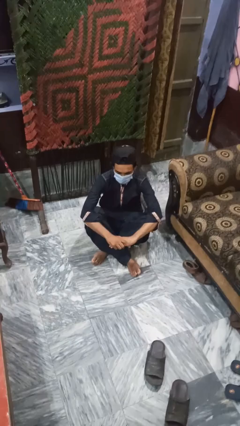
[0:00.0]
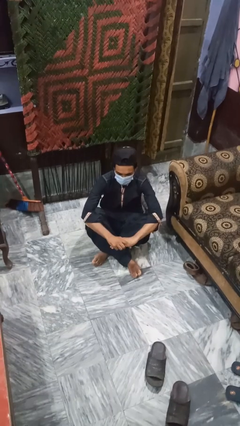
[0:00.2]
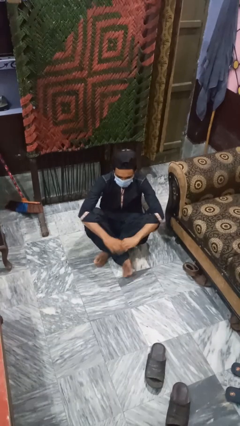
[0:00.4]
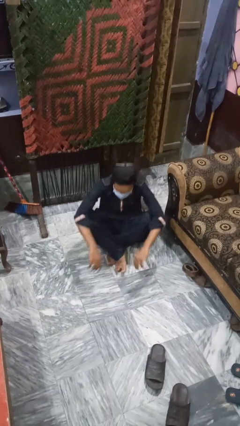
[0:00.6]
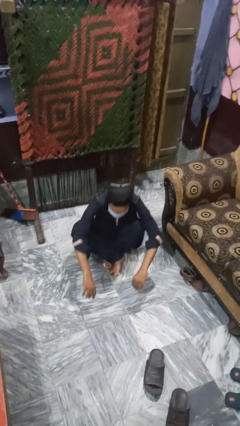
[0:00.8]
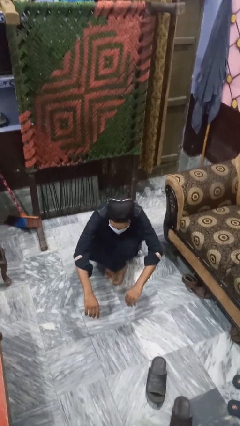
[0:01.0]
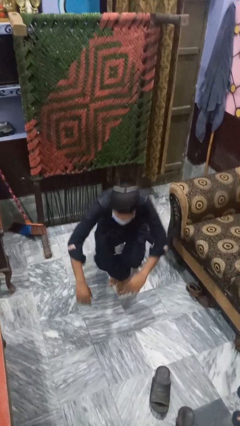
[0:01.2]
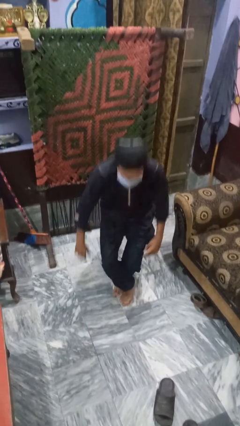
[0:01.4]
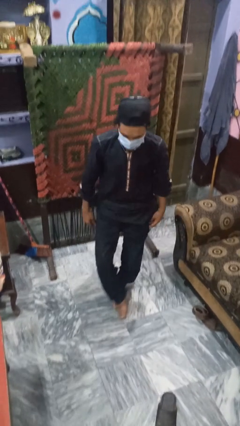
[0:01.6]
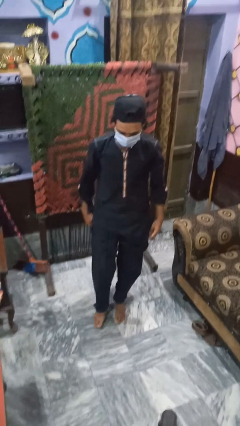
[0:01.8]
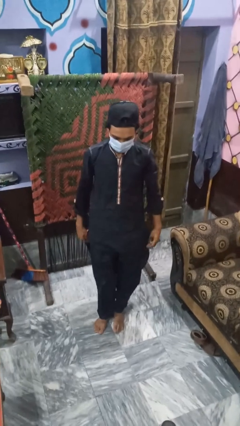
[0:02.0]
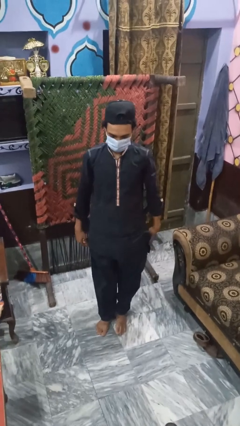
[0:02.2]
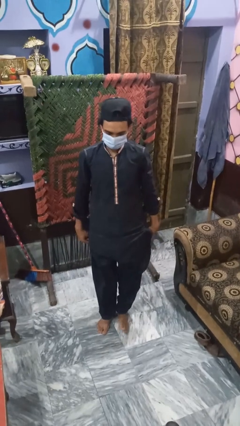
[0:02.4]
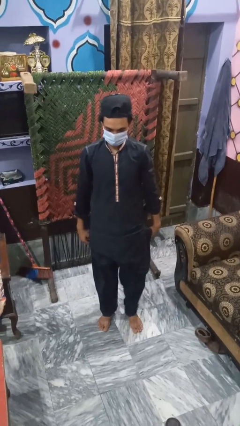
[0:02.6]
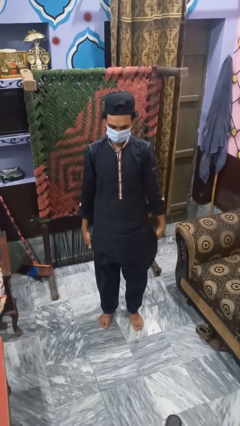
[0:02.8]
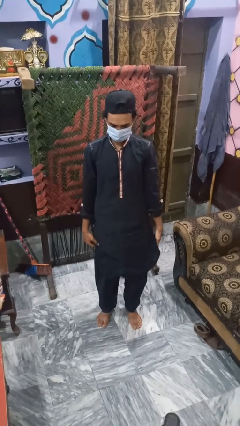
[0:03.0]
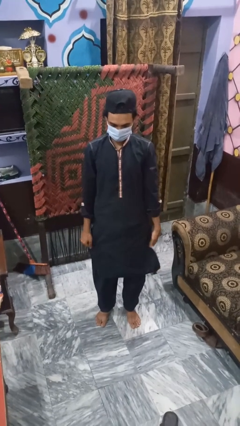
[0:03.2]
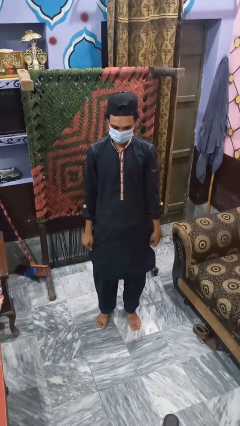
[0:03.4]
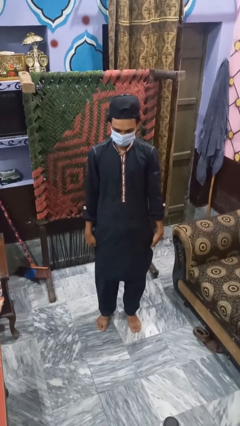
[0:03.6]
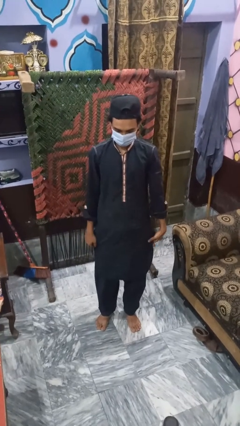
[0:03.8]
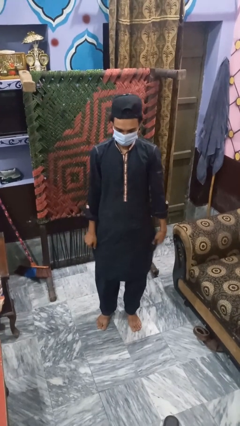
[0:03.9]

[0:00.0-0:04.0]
person stands up from floor

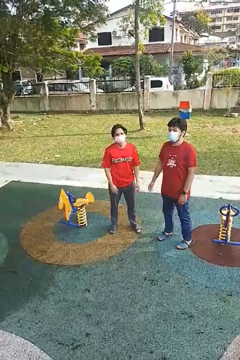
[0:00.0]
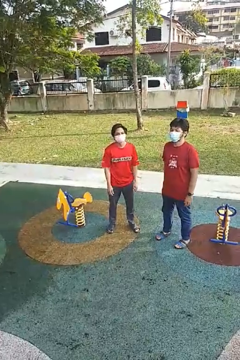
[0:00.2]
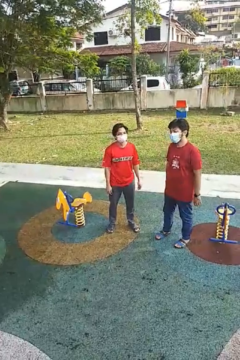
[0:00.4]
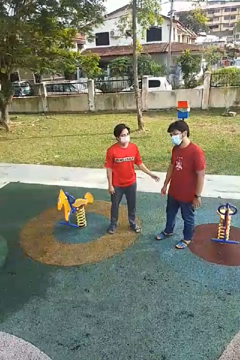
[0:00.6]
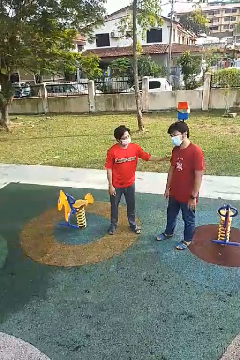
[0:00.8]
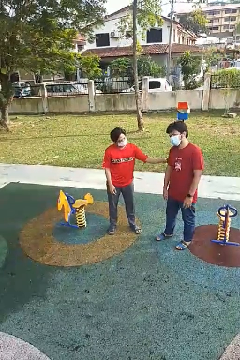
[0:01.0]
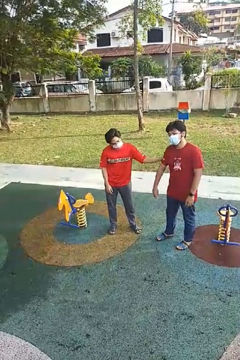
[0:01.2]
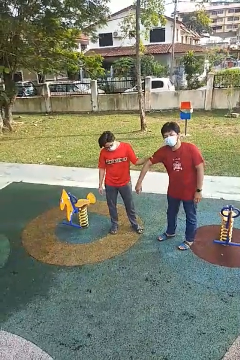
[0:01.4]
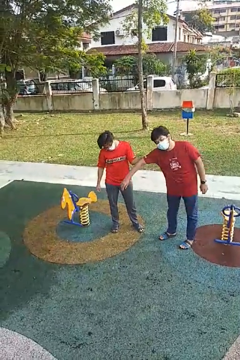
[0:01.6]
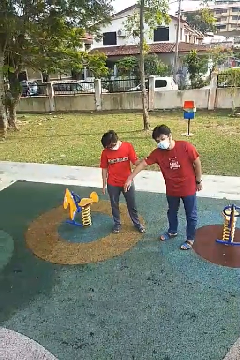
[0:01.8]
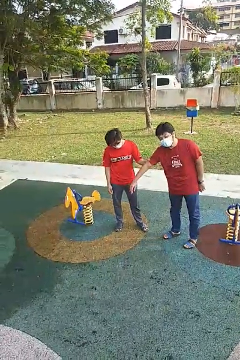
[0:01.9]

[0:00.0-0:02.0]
person grabs person by bicep

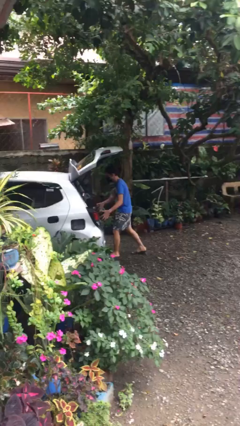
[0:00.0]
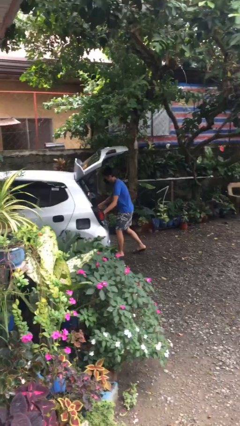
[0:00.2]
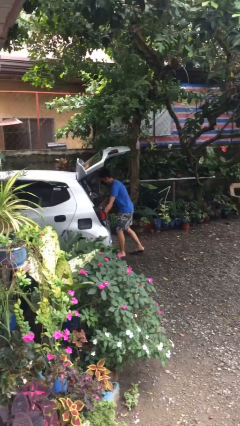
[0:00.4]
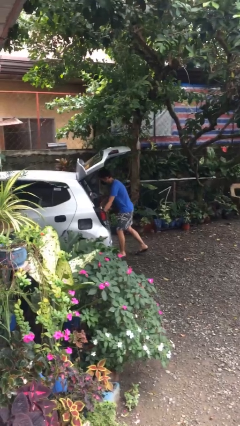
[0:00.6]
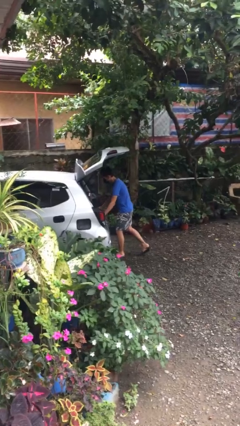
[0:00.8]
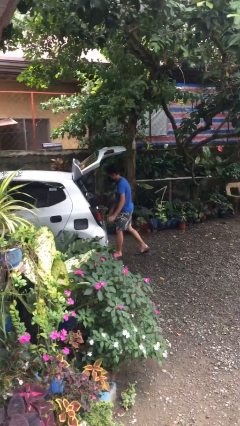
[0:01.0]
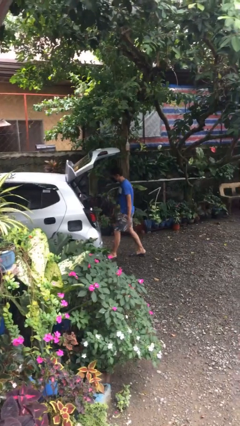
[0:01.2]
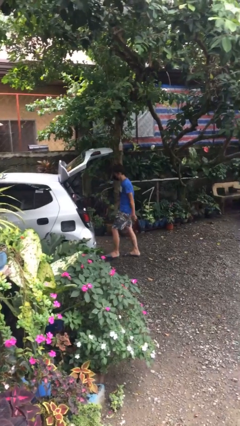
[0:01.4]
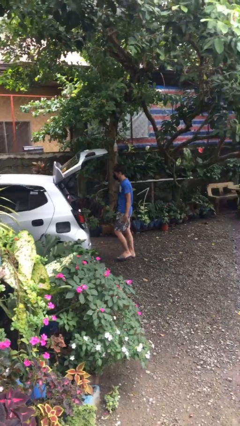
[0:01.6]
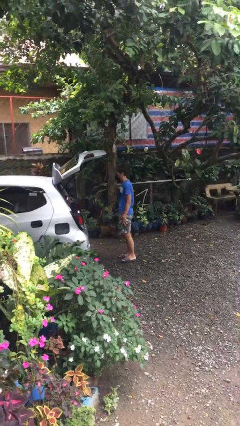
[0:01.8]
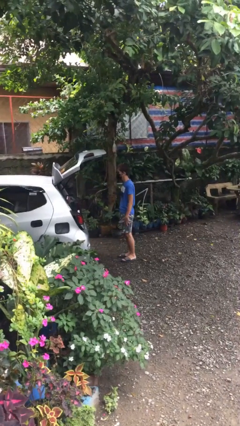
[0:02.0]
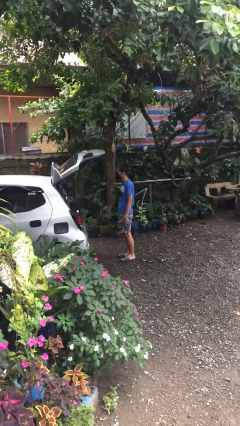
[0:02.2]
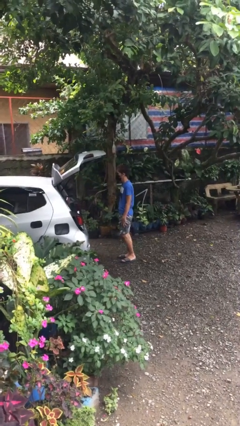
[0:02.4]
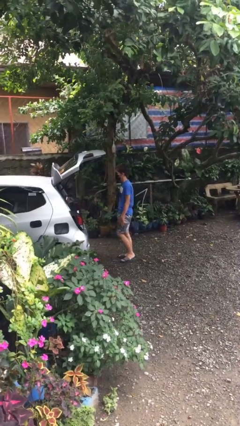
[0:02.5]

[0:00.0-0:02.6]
person loads car

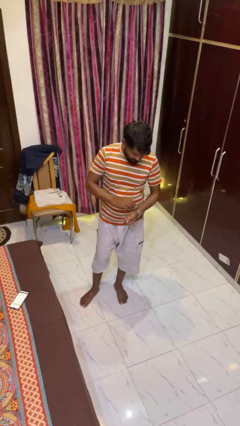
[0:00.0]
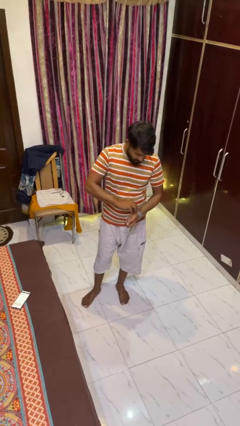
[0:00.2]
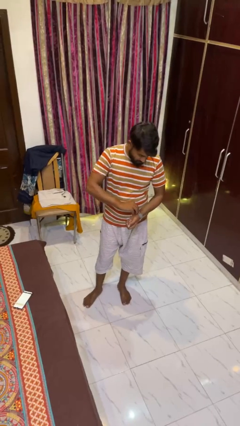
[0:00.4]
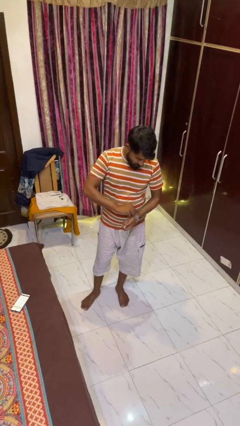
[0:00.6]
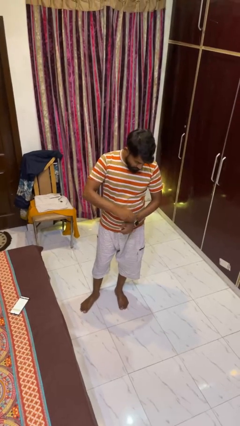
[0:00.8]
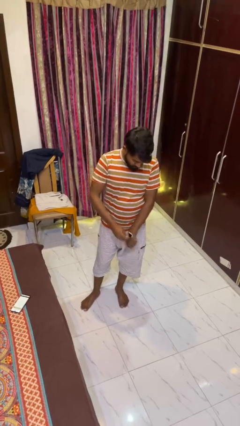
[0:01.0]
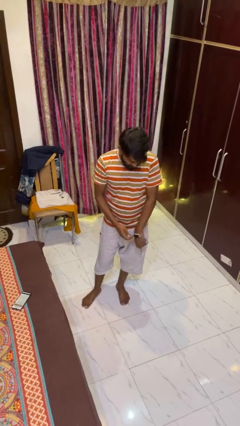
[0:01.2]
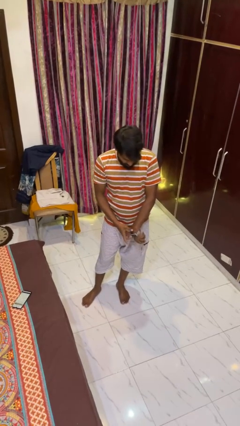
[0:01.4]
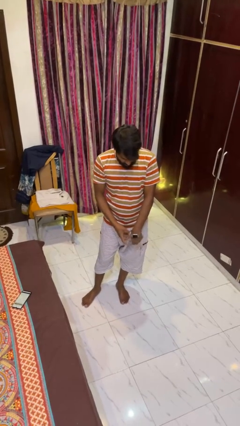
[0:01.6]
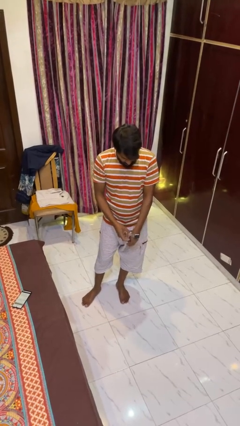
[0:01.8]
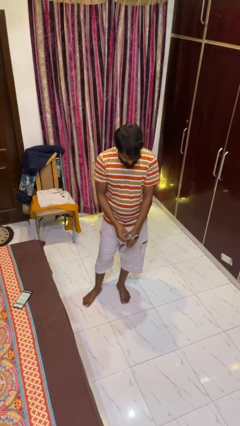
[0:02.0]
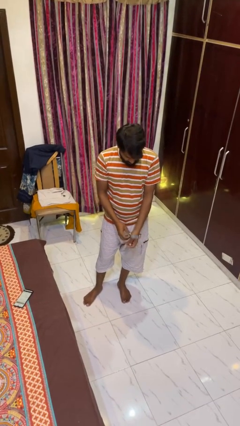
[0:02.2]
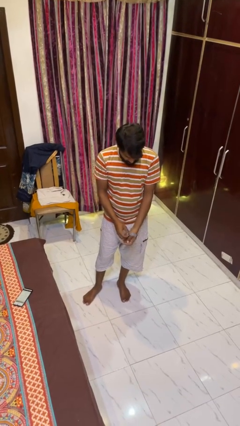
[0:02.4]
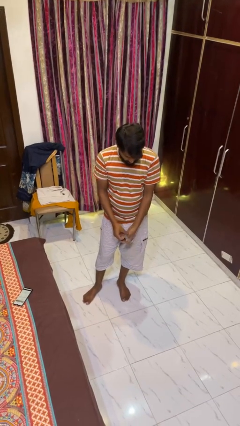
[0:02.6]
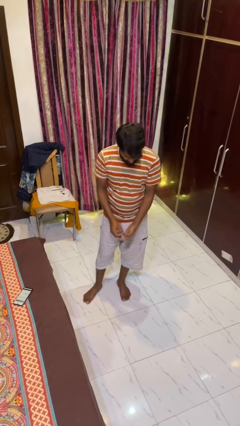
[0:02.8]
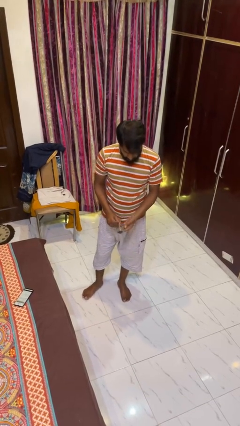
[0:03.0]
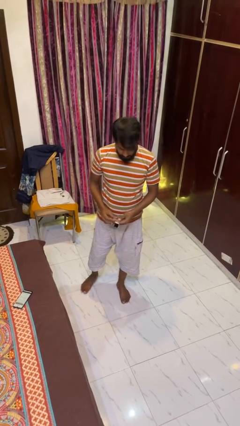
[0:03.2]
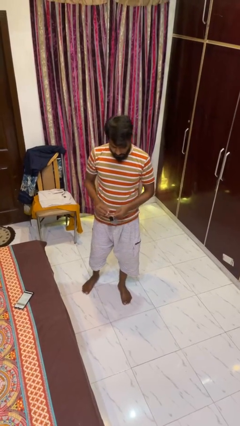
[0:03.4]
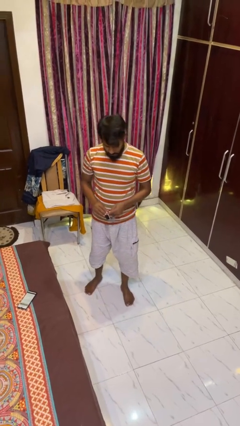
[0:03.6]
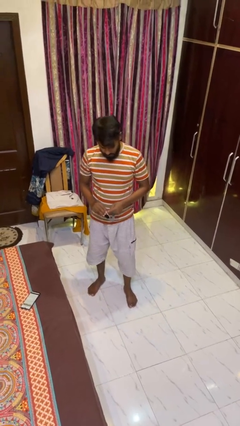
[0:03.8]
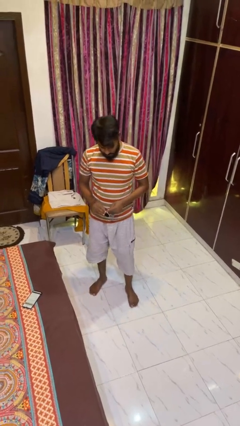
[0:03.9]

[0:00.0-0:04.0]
person takes off wristwatch

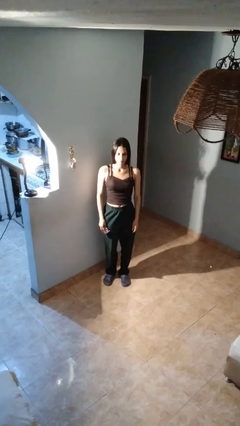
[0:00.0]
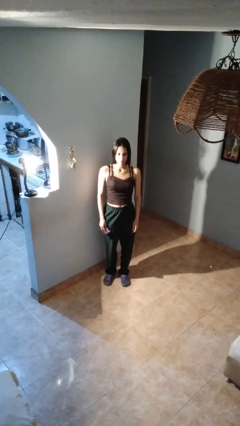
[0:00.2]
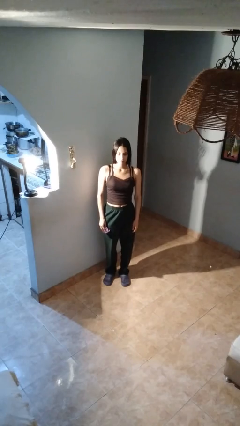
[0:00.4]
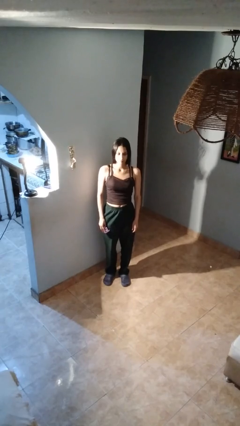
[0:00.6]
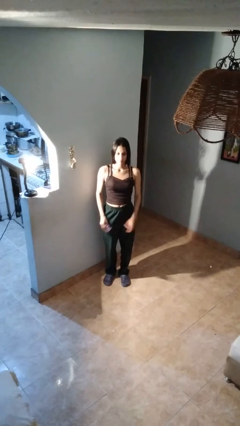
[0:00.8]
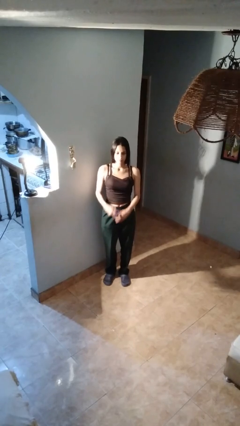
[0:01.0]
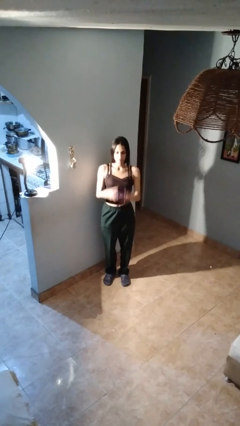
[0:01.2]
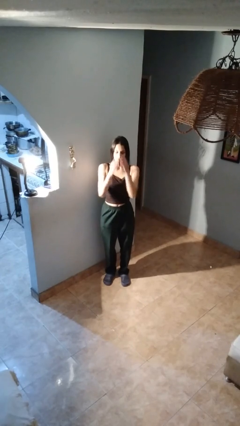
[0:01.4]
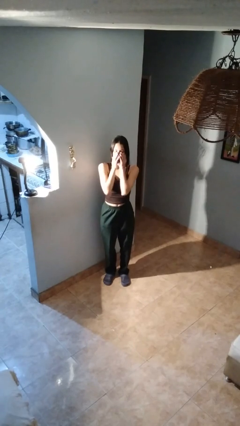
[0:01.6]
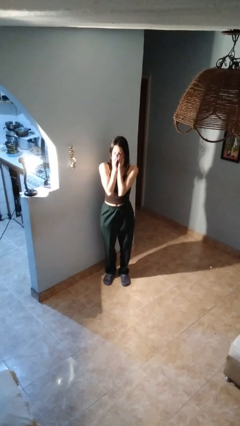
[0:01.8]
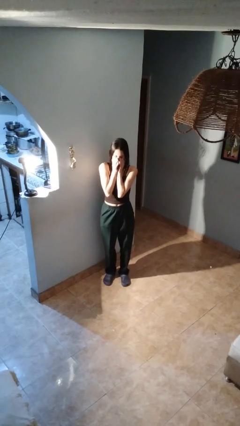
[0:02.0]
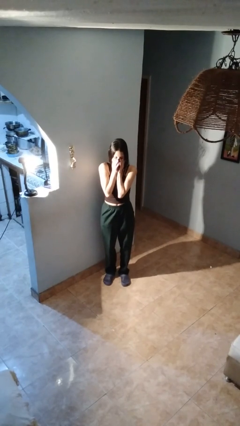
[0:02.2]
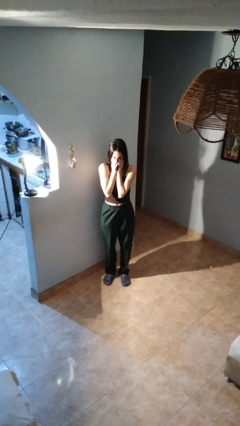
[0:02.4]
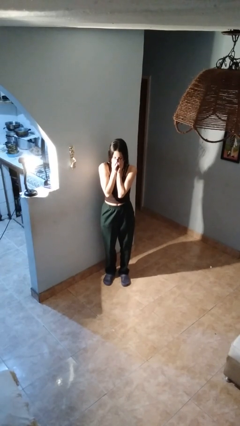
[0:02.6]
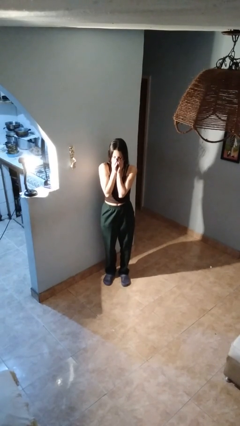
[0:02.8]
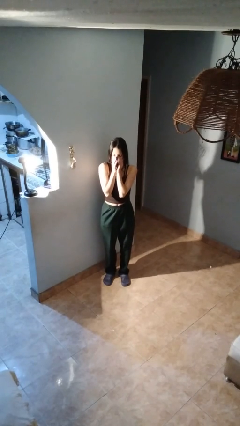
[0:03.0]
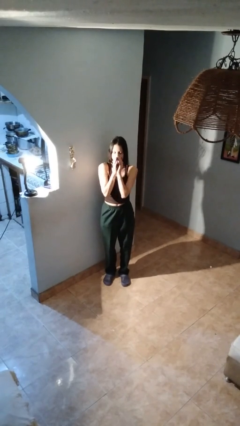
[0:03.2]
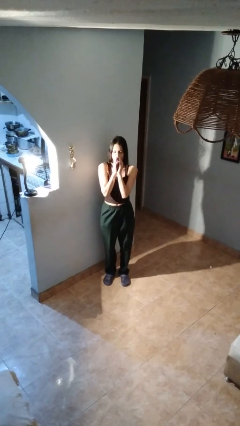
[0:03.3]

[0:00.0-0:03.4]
person blows nose

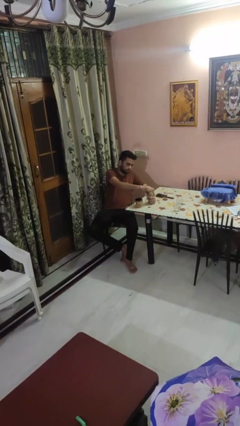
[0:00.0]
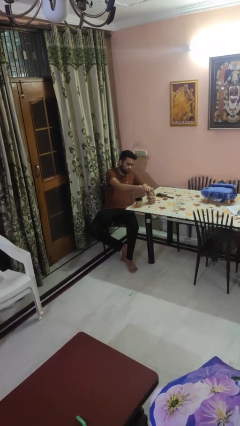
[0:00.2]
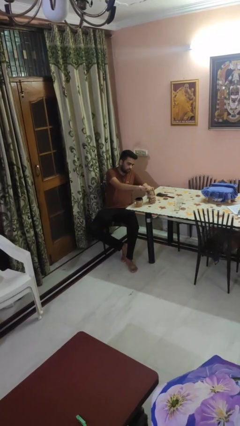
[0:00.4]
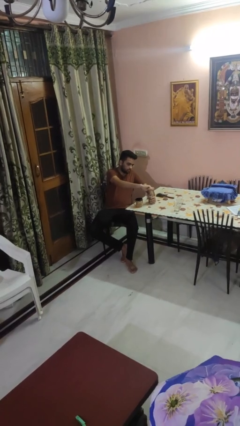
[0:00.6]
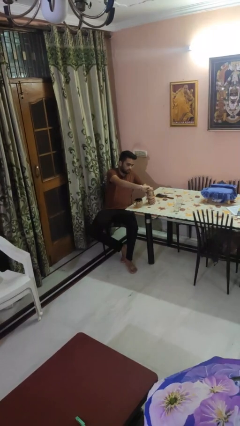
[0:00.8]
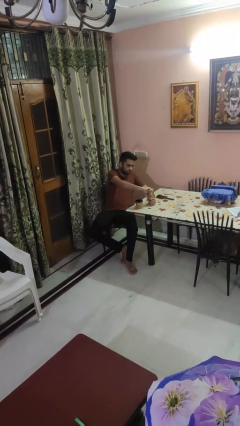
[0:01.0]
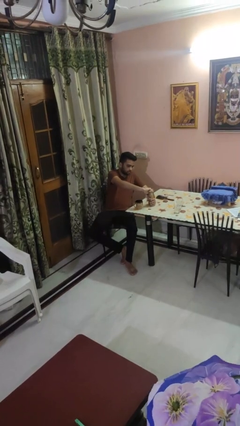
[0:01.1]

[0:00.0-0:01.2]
person unscrews lid from bottle

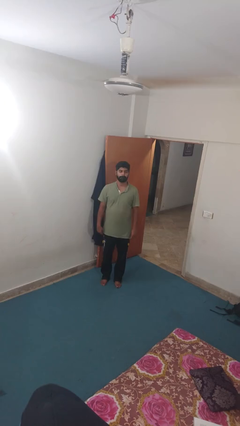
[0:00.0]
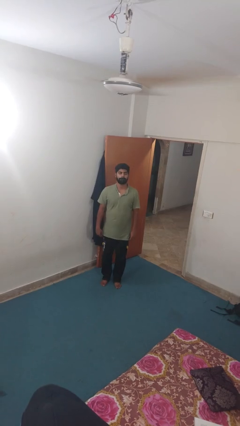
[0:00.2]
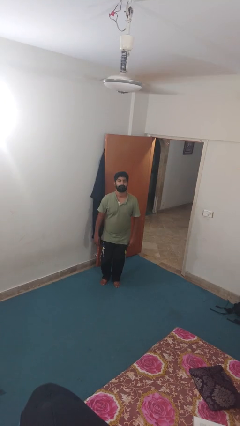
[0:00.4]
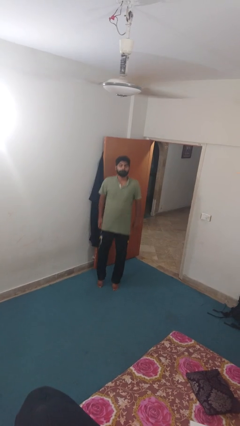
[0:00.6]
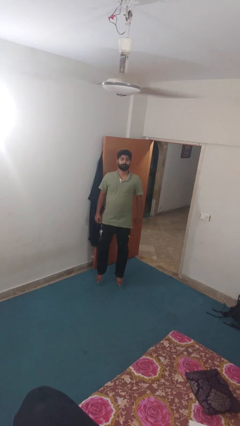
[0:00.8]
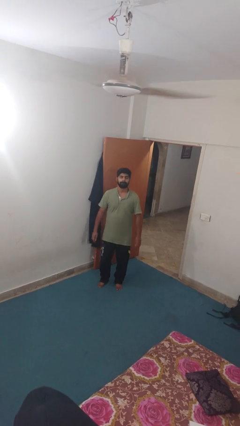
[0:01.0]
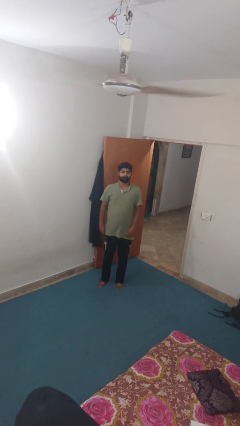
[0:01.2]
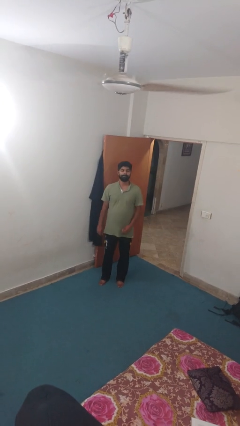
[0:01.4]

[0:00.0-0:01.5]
person jumps
